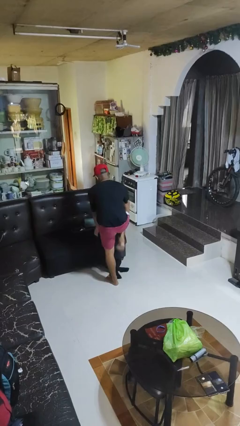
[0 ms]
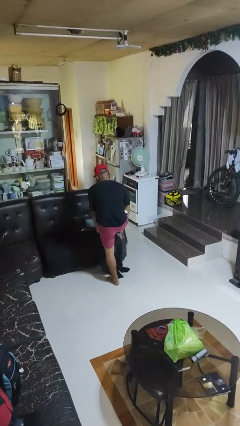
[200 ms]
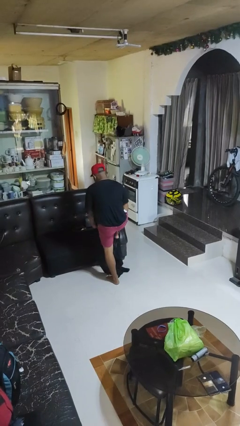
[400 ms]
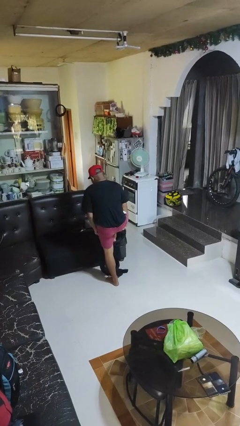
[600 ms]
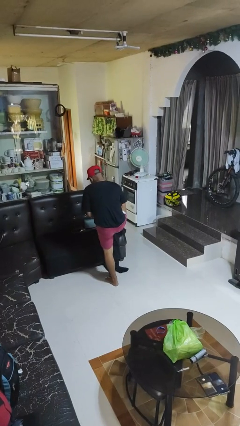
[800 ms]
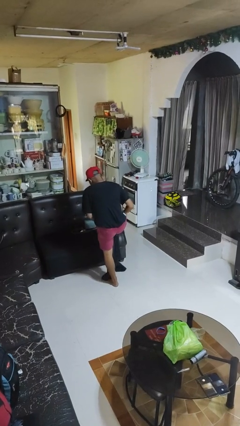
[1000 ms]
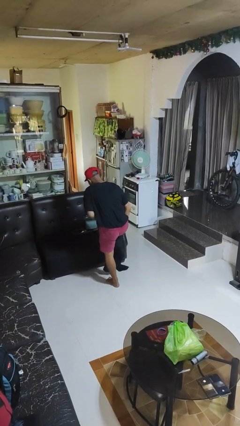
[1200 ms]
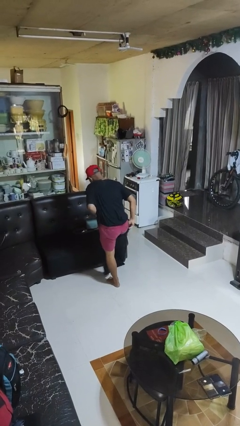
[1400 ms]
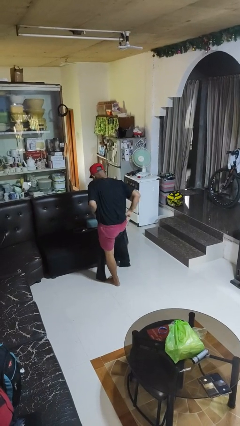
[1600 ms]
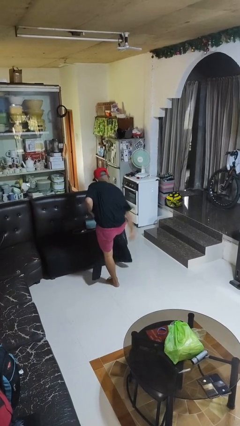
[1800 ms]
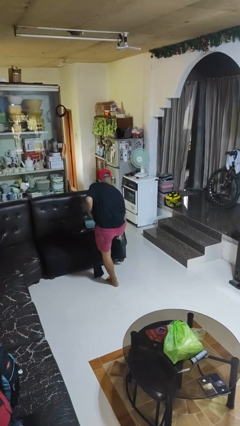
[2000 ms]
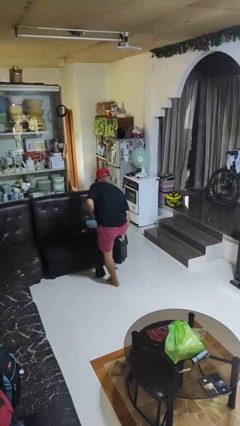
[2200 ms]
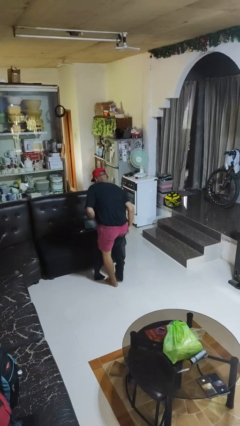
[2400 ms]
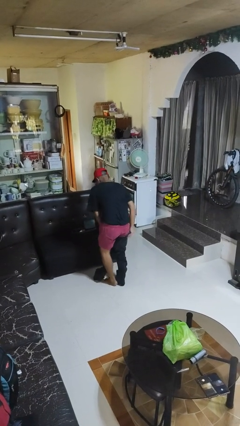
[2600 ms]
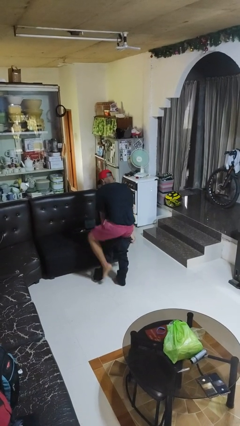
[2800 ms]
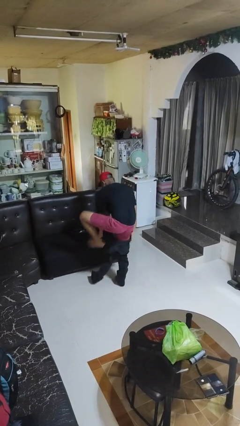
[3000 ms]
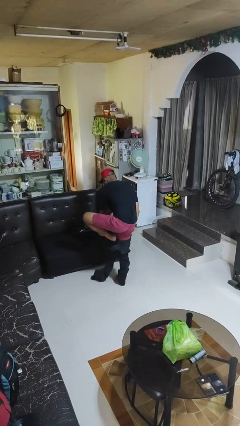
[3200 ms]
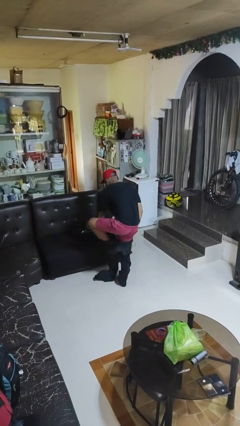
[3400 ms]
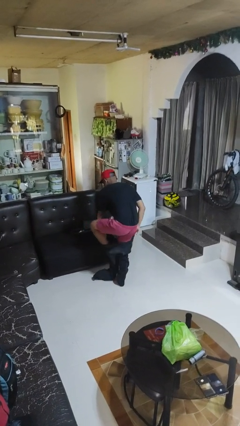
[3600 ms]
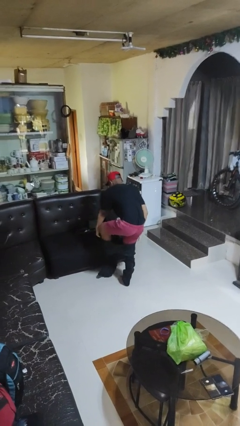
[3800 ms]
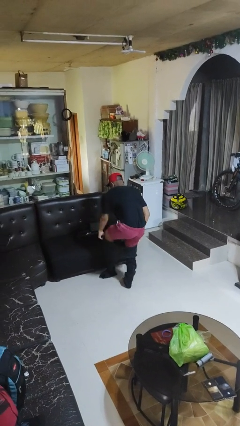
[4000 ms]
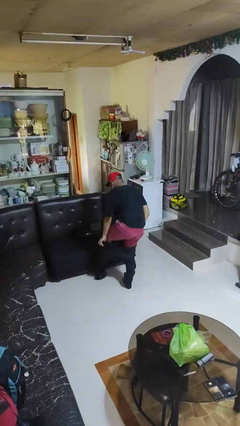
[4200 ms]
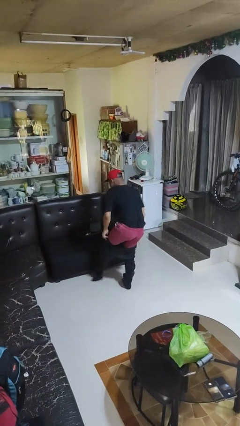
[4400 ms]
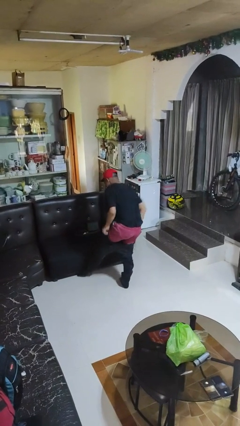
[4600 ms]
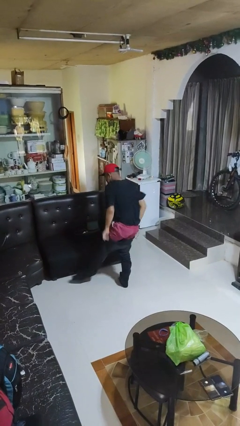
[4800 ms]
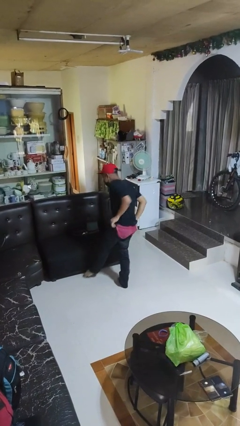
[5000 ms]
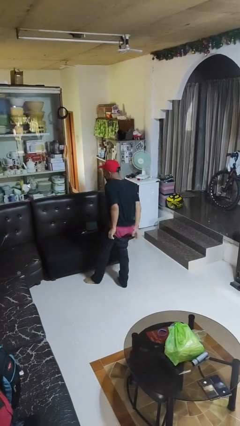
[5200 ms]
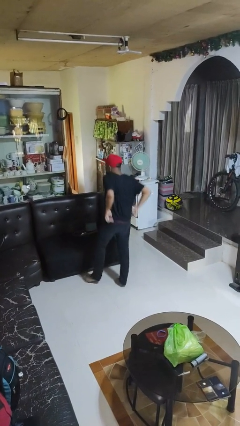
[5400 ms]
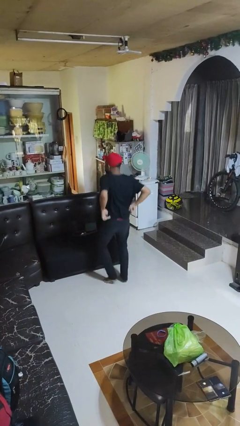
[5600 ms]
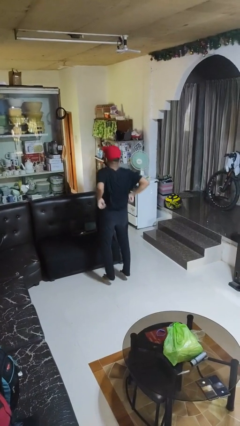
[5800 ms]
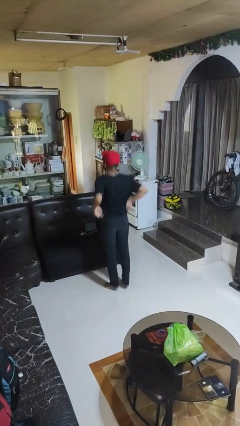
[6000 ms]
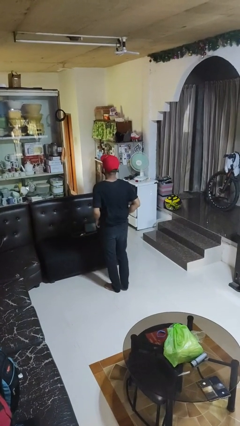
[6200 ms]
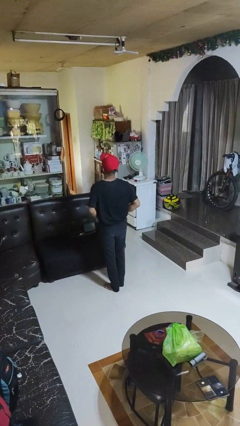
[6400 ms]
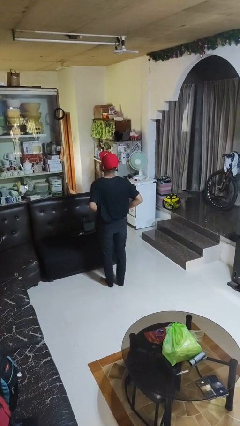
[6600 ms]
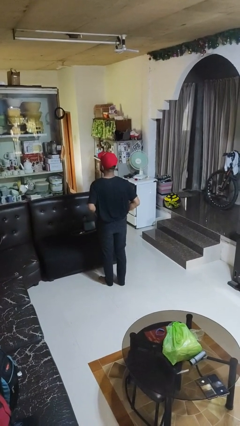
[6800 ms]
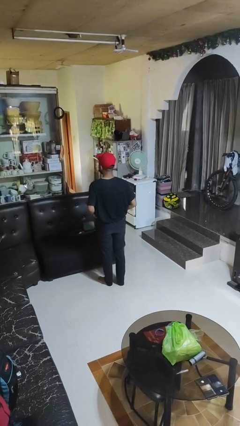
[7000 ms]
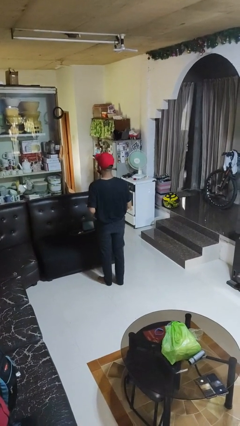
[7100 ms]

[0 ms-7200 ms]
person puts on pants

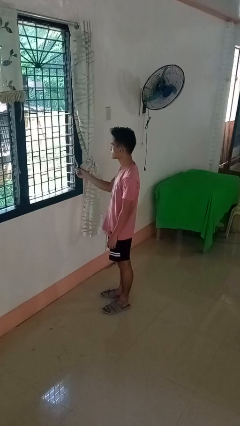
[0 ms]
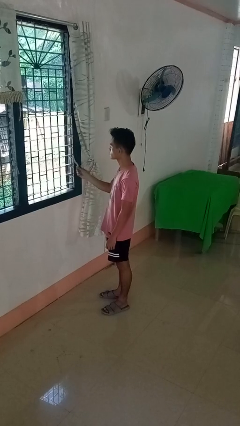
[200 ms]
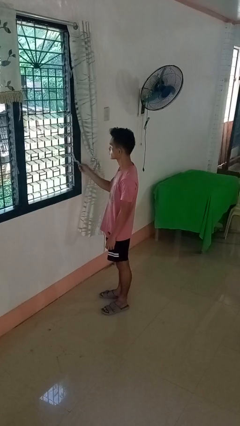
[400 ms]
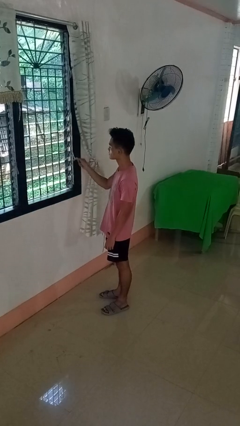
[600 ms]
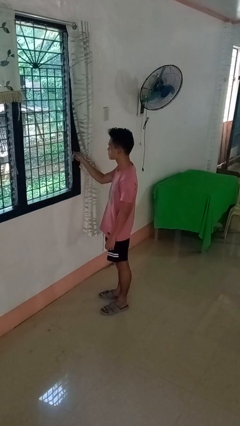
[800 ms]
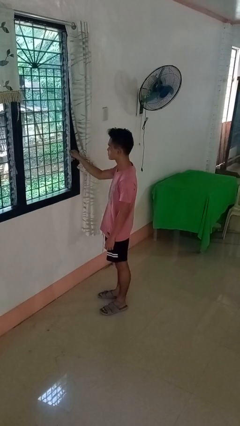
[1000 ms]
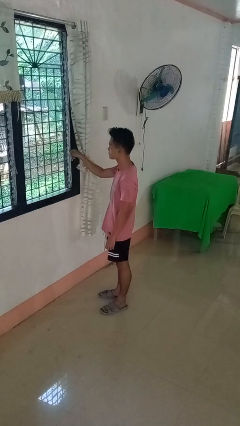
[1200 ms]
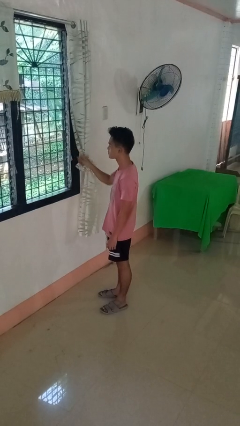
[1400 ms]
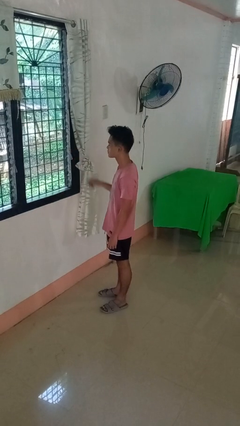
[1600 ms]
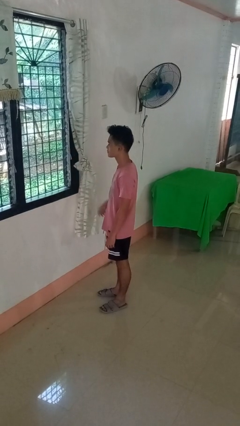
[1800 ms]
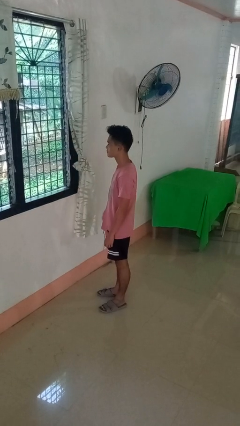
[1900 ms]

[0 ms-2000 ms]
person closes home window

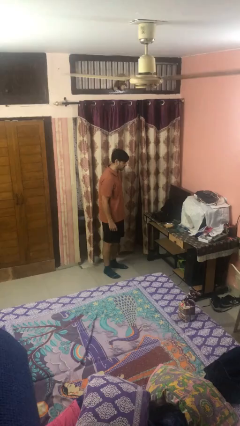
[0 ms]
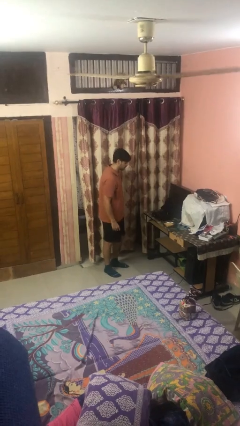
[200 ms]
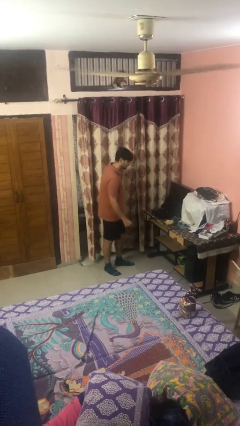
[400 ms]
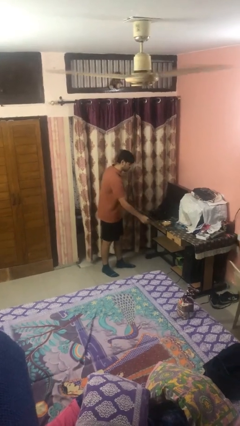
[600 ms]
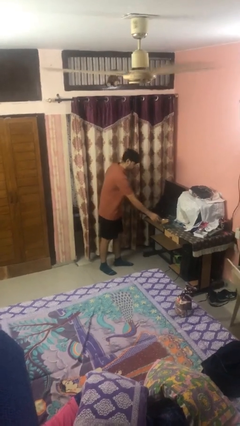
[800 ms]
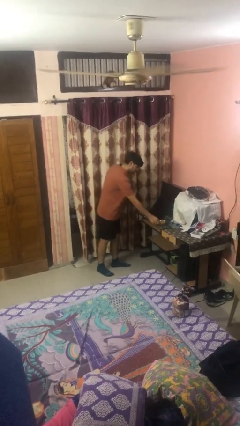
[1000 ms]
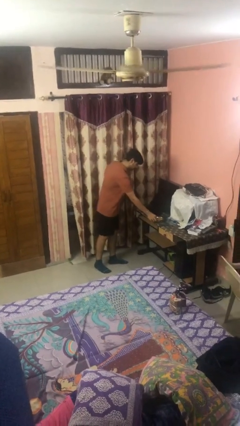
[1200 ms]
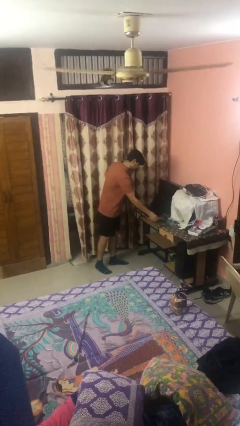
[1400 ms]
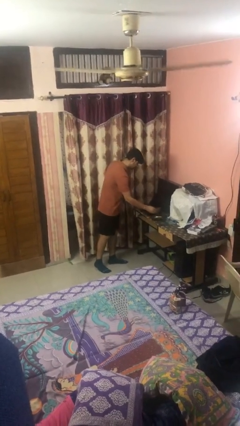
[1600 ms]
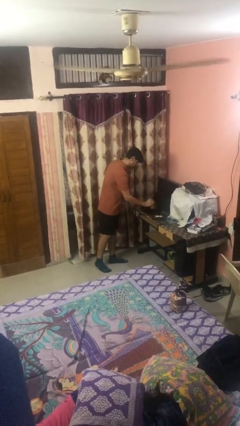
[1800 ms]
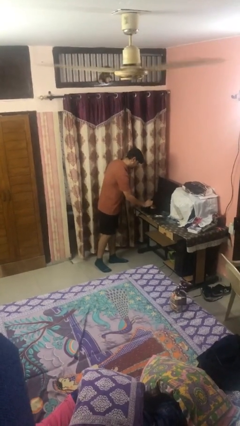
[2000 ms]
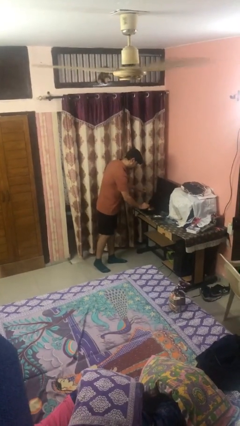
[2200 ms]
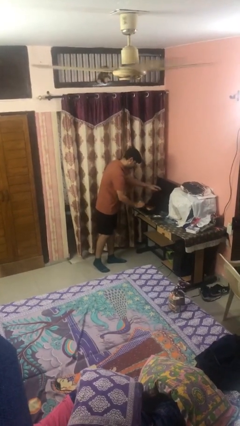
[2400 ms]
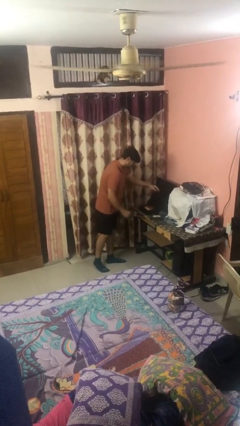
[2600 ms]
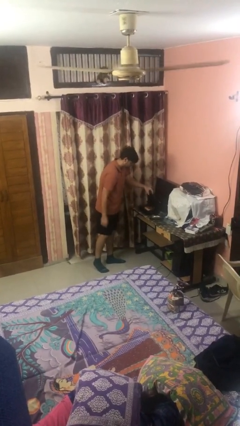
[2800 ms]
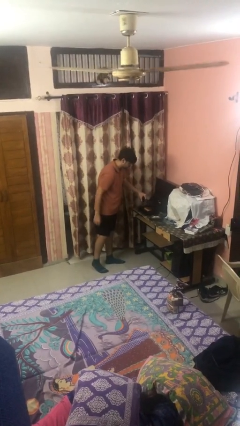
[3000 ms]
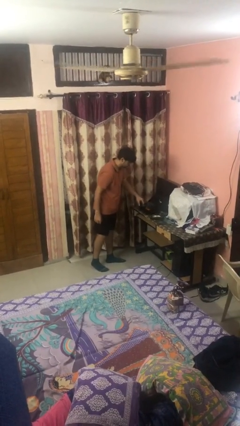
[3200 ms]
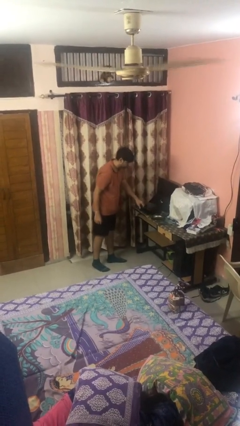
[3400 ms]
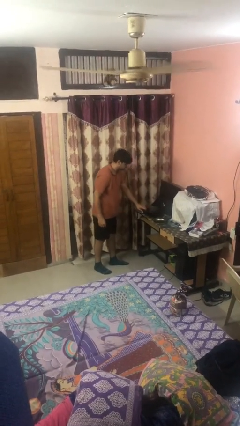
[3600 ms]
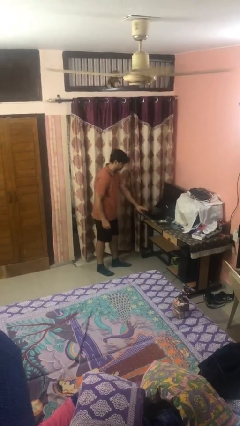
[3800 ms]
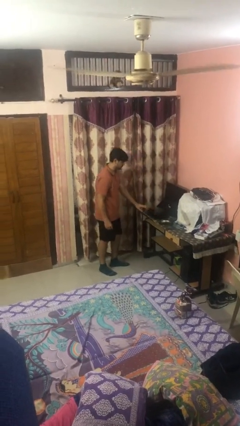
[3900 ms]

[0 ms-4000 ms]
person puts object into toaster

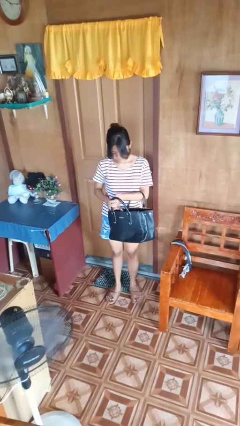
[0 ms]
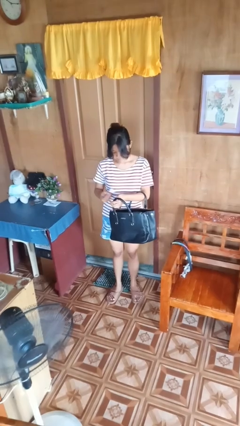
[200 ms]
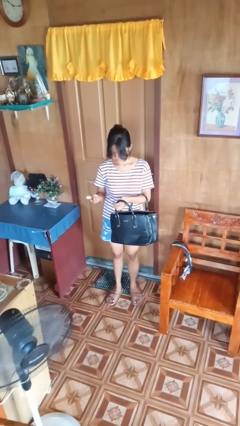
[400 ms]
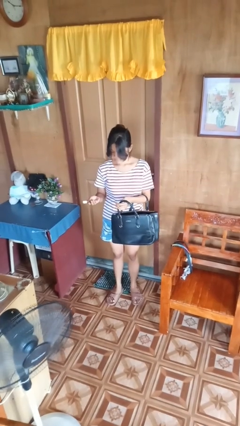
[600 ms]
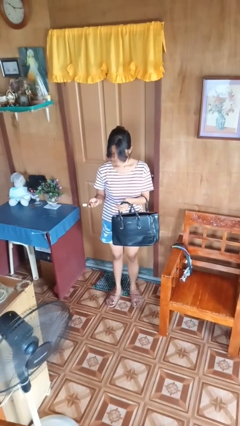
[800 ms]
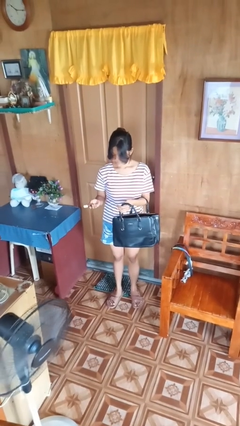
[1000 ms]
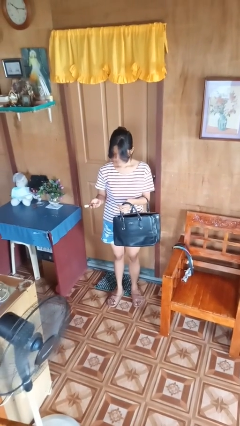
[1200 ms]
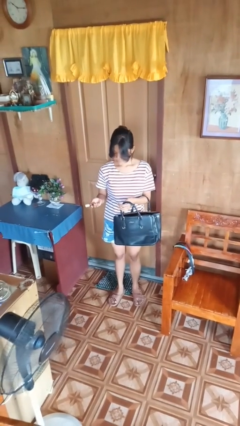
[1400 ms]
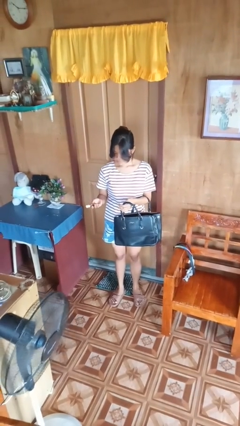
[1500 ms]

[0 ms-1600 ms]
person takes object from purse

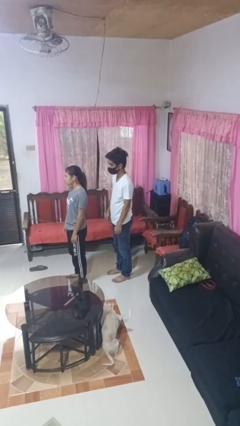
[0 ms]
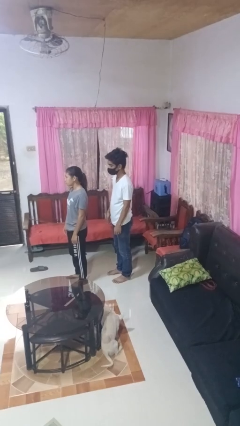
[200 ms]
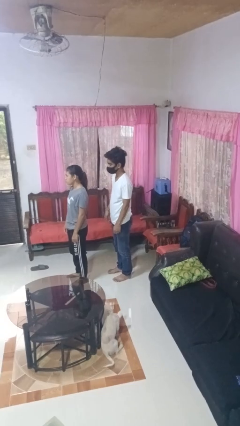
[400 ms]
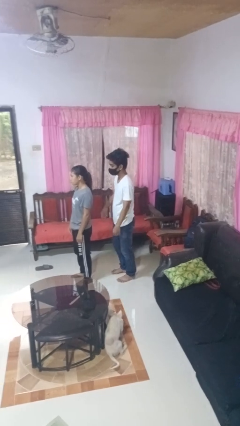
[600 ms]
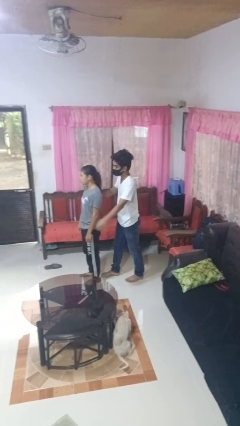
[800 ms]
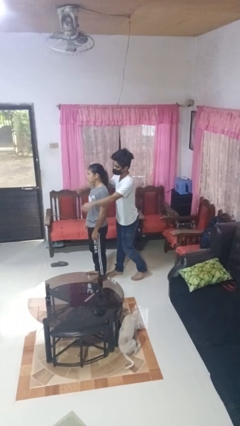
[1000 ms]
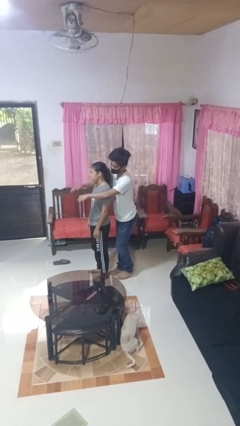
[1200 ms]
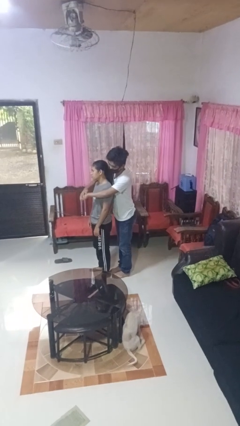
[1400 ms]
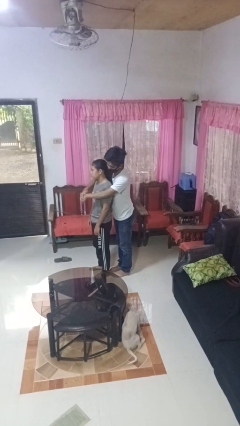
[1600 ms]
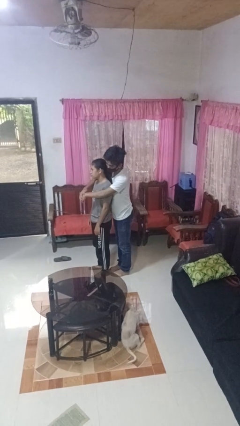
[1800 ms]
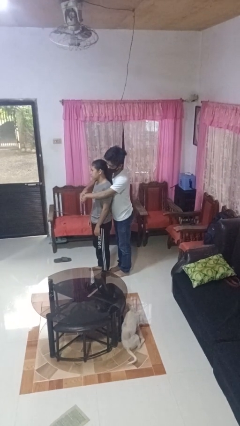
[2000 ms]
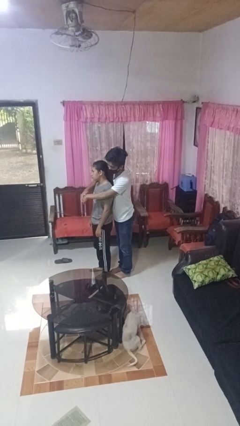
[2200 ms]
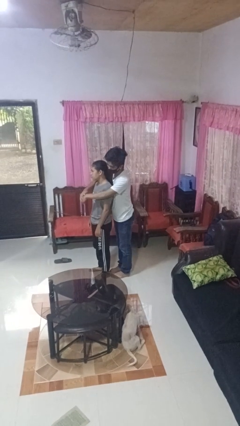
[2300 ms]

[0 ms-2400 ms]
person hugs person from behind

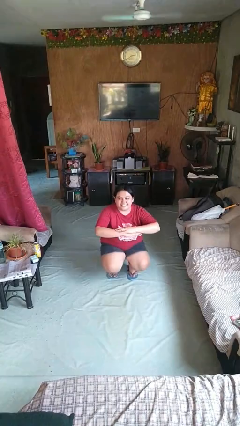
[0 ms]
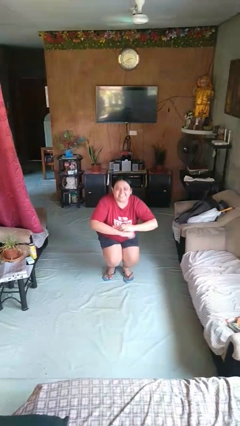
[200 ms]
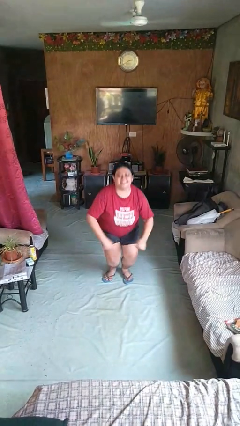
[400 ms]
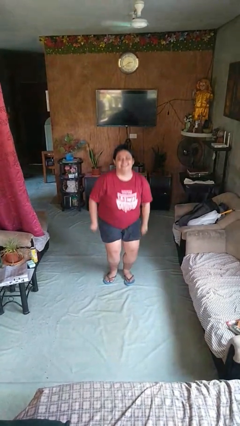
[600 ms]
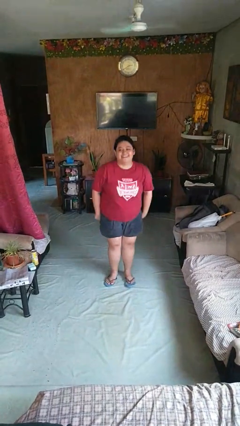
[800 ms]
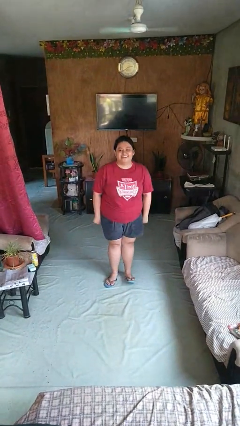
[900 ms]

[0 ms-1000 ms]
person stands up
